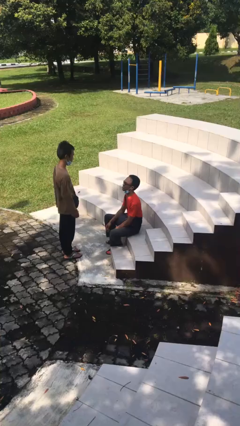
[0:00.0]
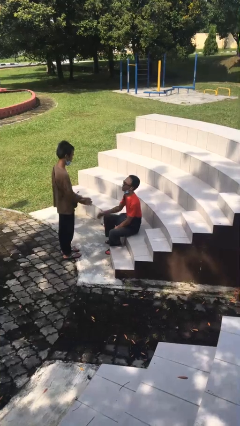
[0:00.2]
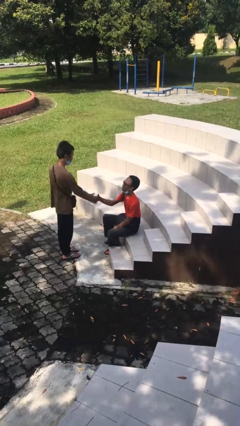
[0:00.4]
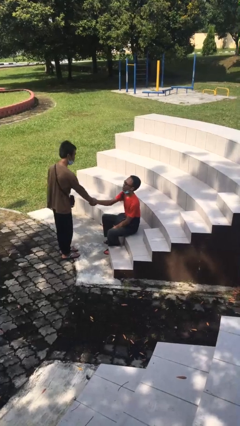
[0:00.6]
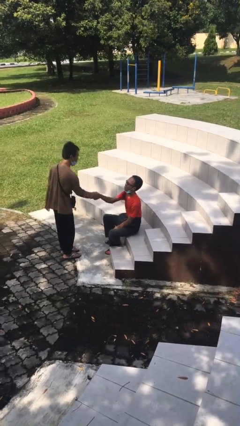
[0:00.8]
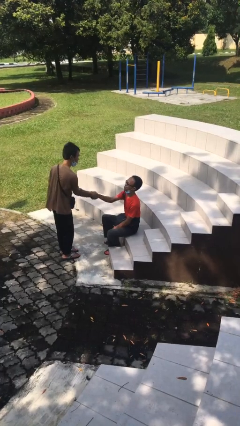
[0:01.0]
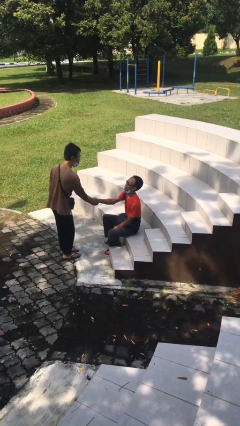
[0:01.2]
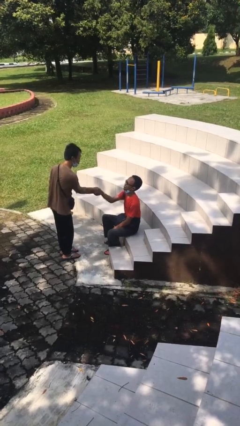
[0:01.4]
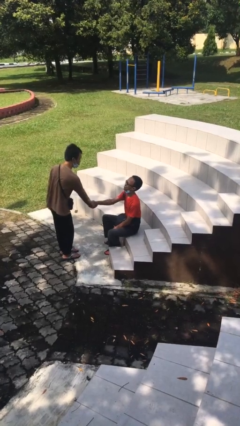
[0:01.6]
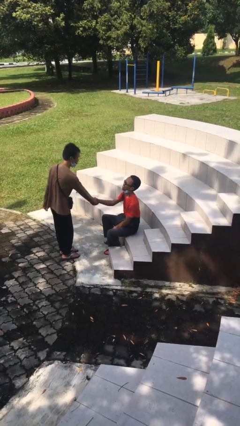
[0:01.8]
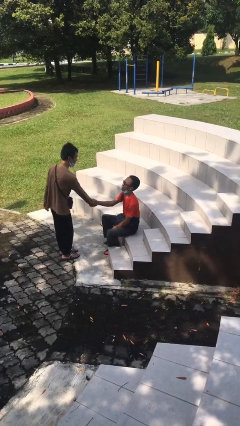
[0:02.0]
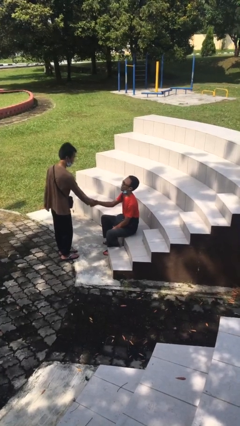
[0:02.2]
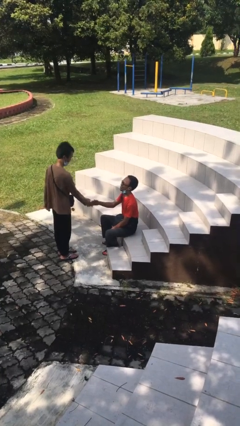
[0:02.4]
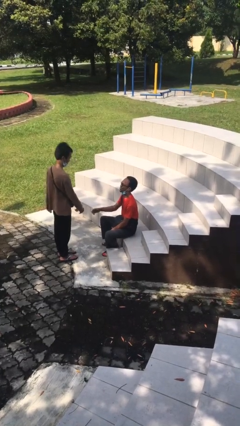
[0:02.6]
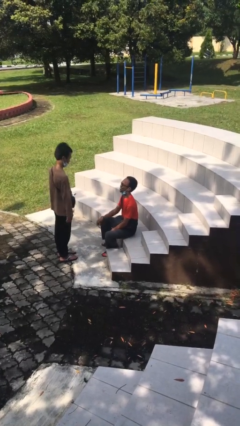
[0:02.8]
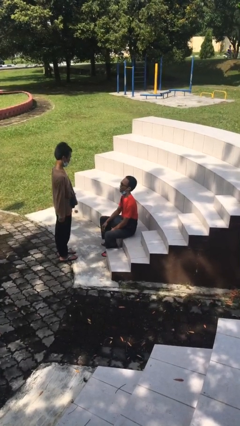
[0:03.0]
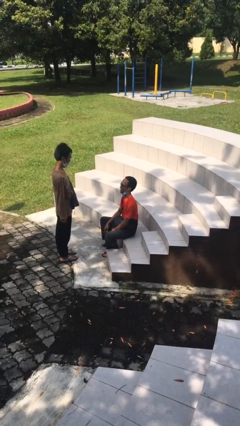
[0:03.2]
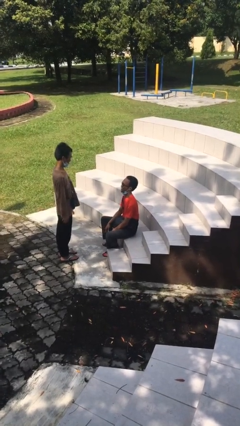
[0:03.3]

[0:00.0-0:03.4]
person shakes hand

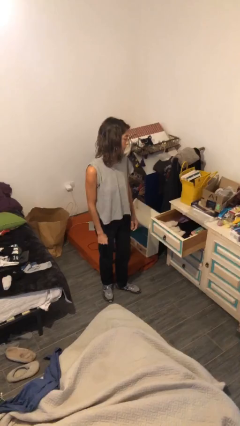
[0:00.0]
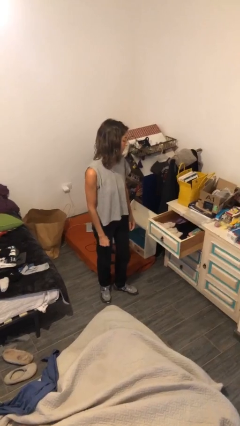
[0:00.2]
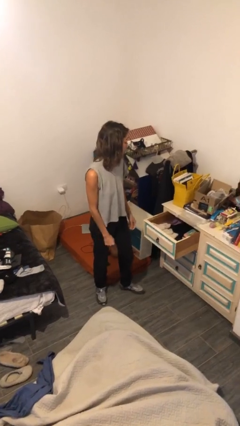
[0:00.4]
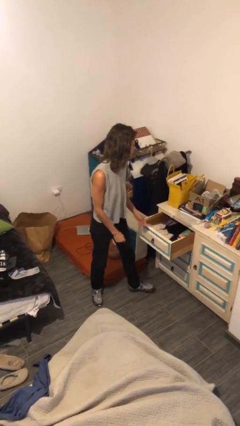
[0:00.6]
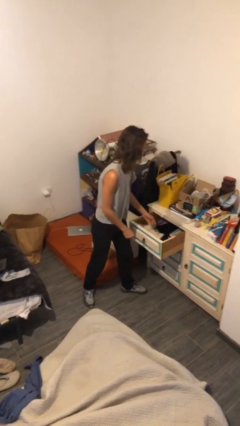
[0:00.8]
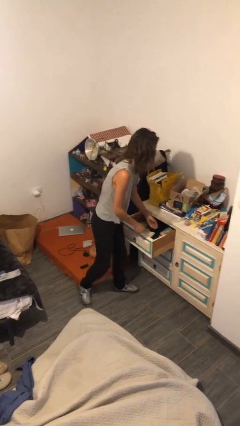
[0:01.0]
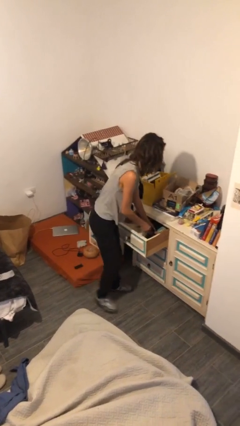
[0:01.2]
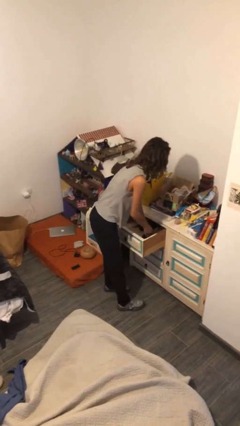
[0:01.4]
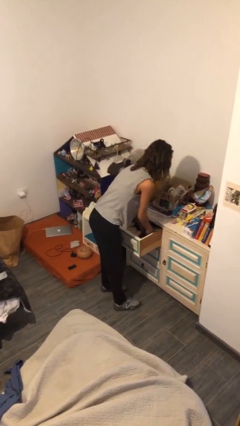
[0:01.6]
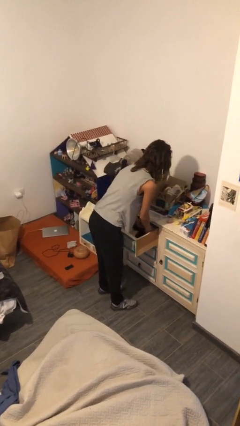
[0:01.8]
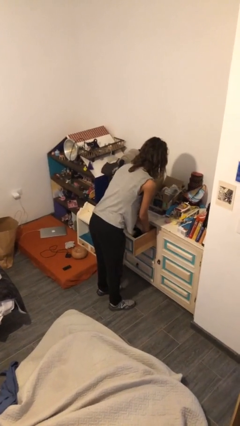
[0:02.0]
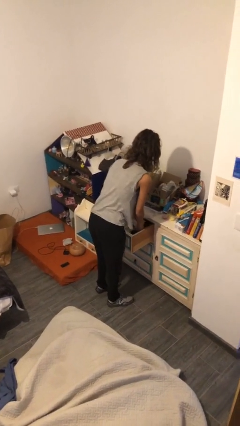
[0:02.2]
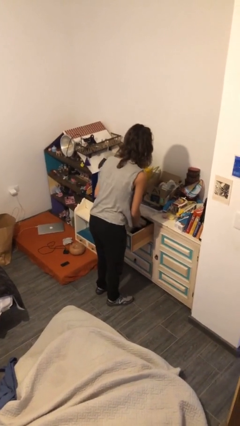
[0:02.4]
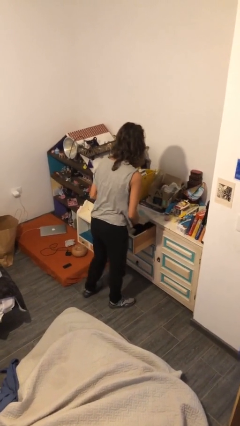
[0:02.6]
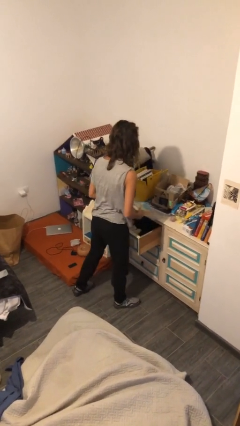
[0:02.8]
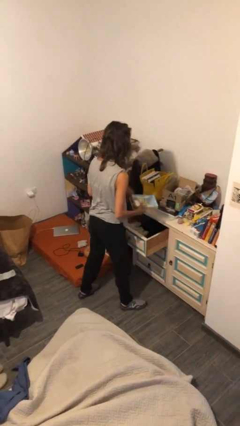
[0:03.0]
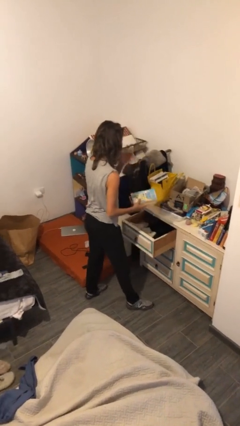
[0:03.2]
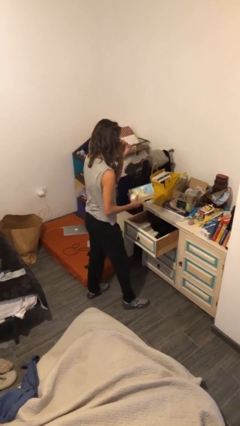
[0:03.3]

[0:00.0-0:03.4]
person picks up object from cabinet

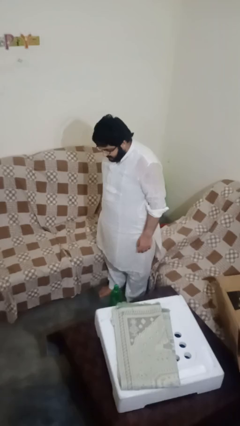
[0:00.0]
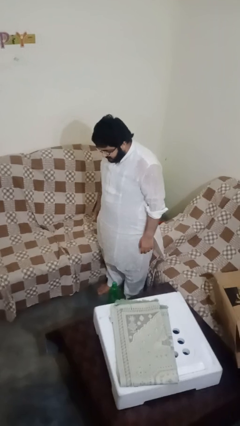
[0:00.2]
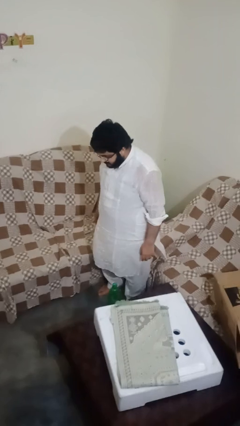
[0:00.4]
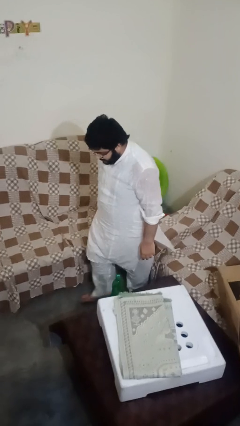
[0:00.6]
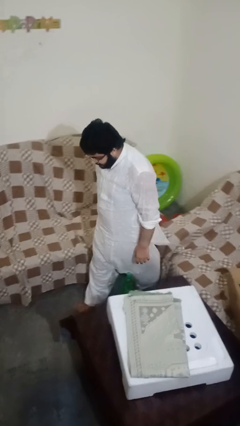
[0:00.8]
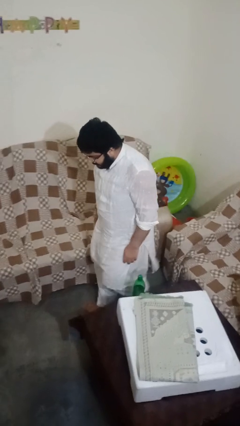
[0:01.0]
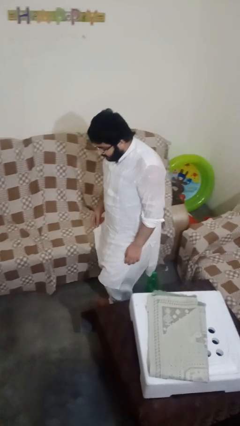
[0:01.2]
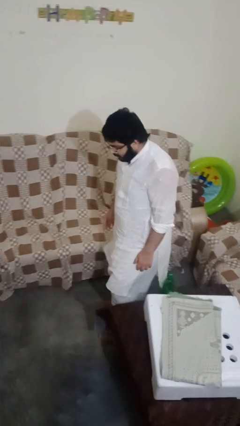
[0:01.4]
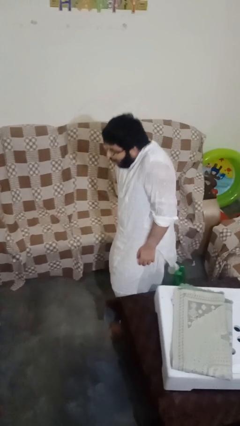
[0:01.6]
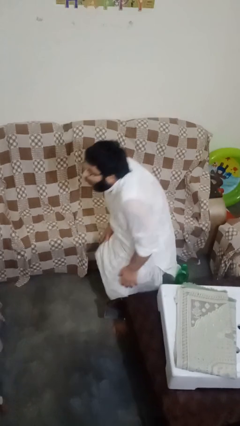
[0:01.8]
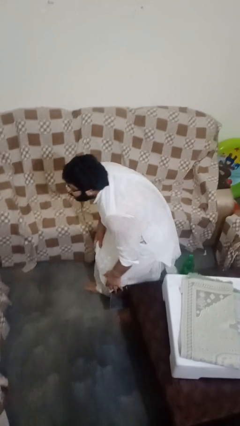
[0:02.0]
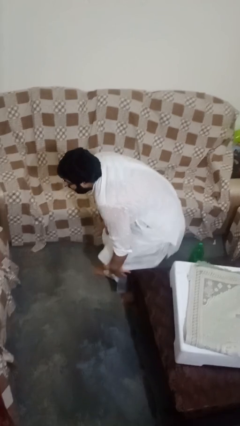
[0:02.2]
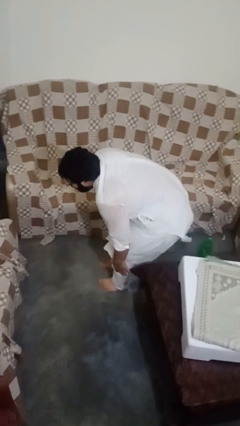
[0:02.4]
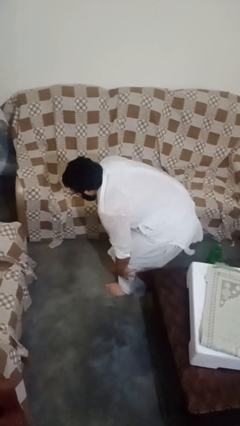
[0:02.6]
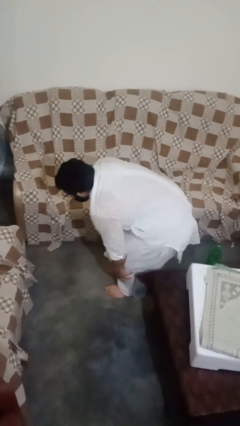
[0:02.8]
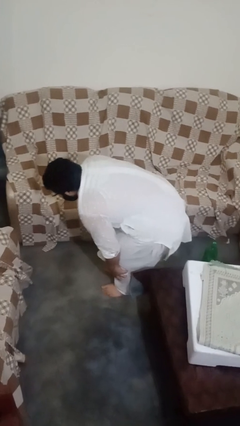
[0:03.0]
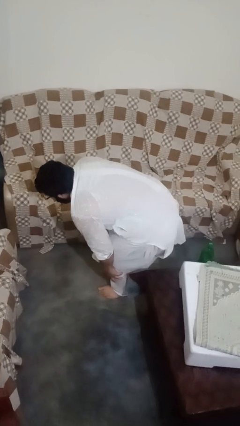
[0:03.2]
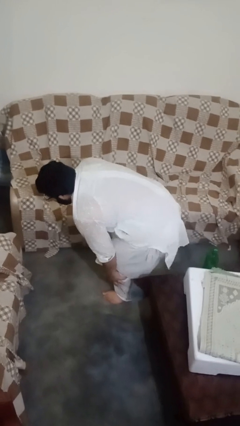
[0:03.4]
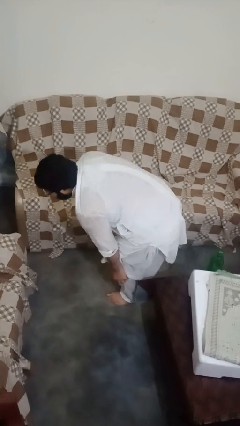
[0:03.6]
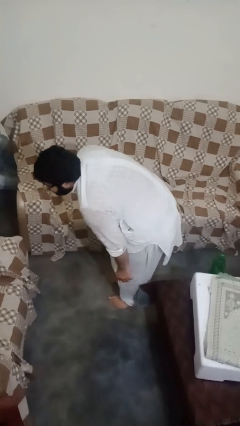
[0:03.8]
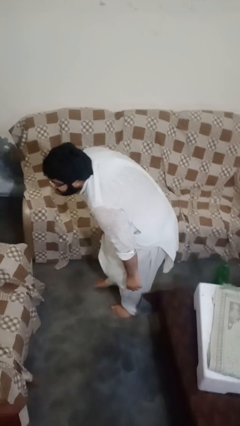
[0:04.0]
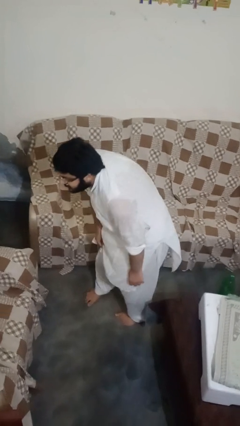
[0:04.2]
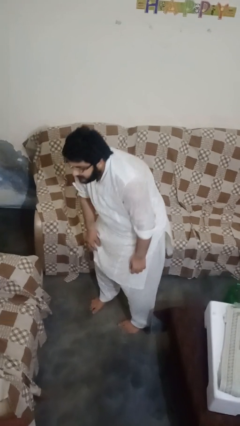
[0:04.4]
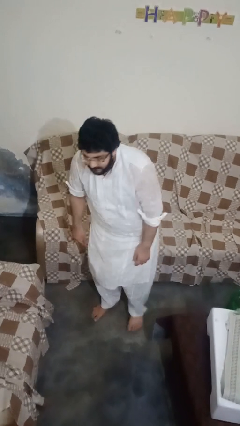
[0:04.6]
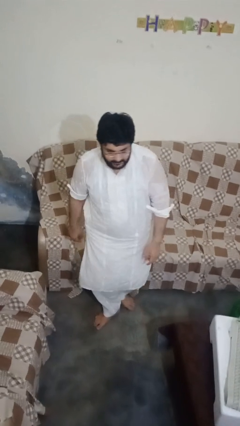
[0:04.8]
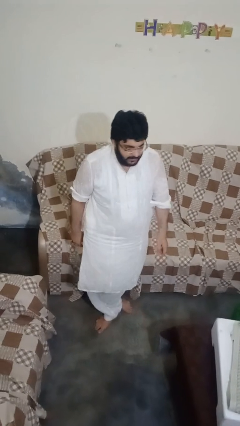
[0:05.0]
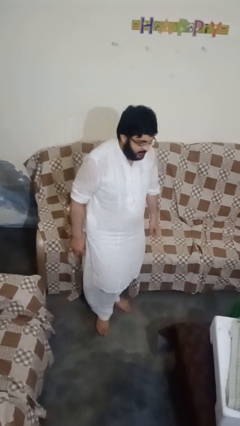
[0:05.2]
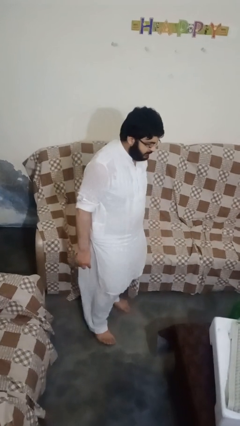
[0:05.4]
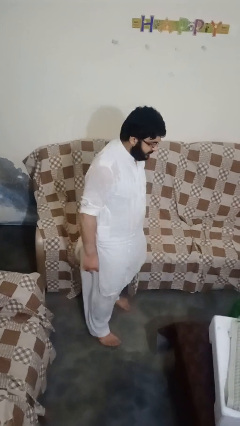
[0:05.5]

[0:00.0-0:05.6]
person bumps into table

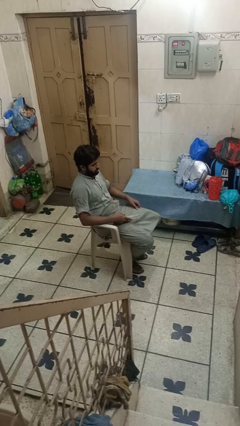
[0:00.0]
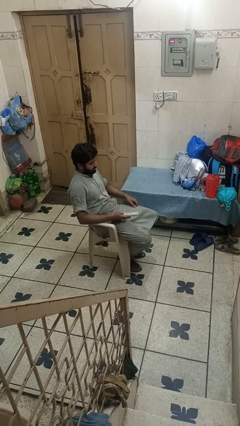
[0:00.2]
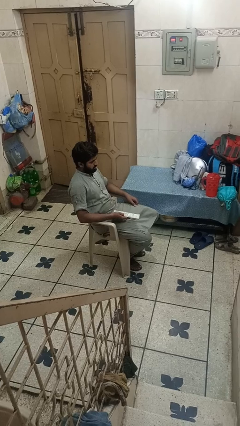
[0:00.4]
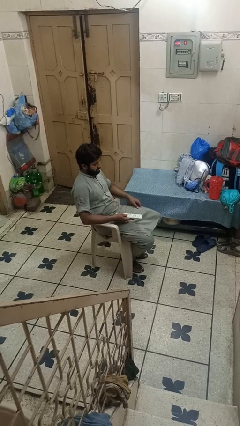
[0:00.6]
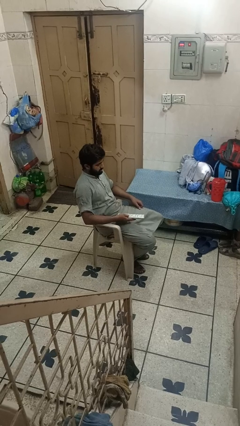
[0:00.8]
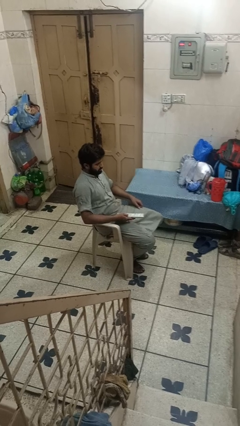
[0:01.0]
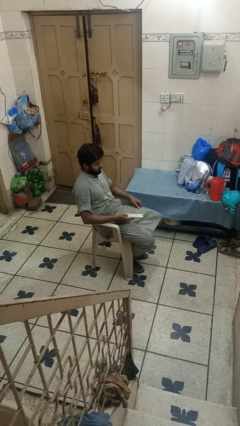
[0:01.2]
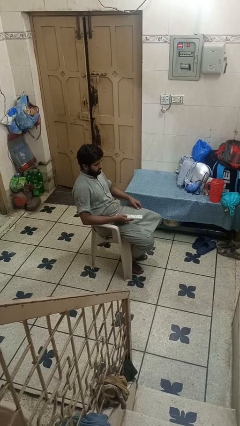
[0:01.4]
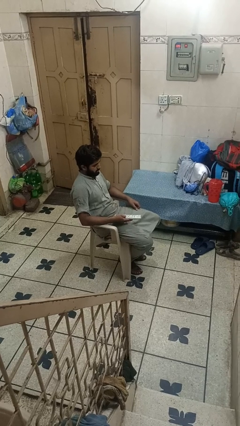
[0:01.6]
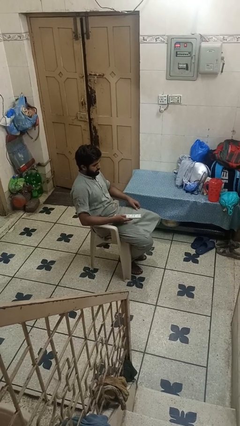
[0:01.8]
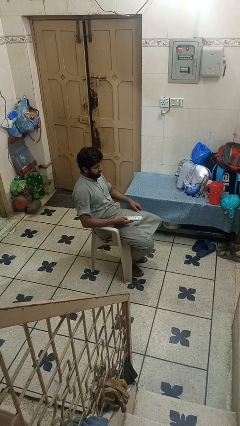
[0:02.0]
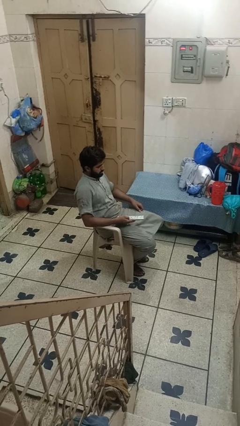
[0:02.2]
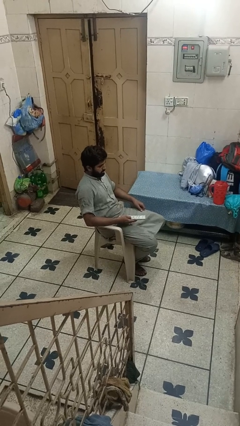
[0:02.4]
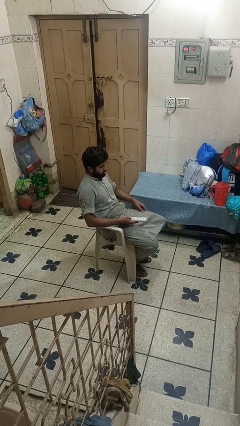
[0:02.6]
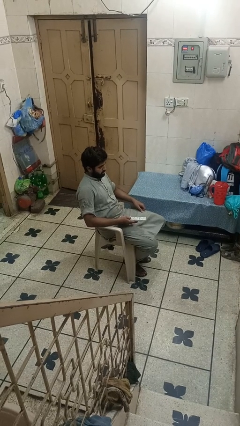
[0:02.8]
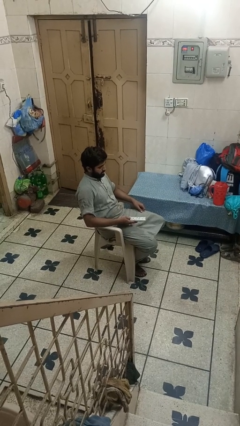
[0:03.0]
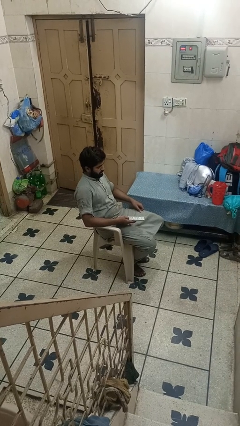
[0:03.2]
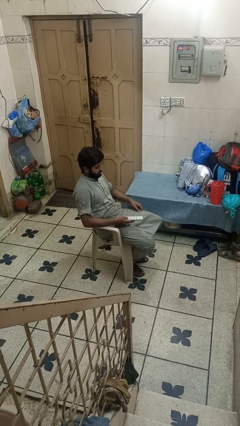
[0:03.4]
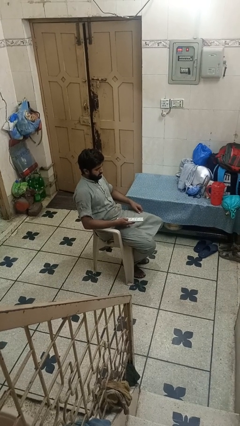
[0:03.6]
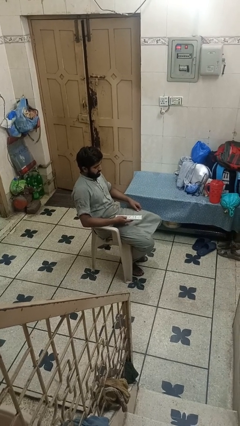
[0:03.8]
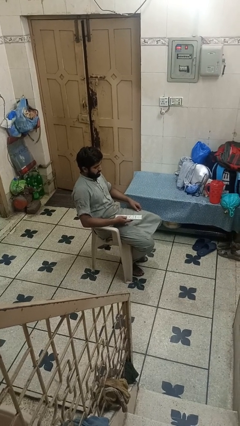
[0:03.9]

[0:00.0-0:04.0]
person uses television remote

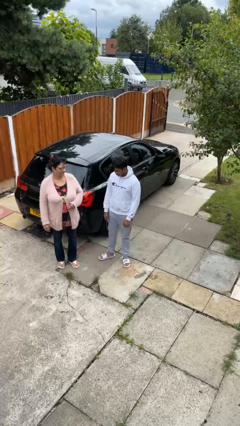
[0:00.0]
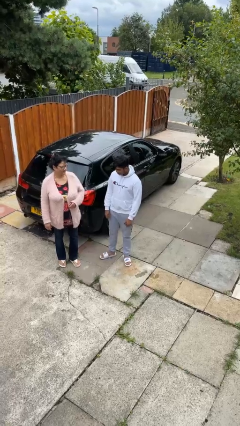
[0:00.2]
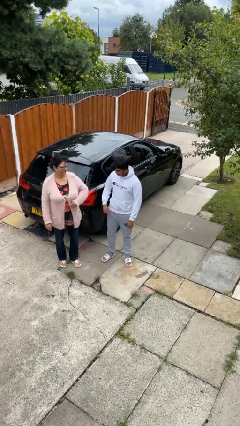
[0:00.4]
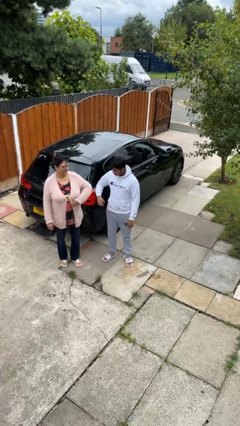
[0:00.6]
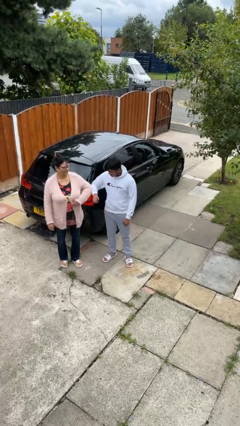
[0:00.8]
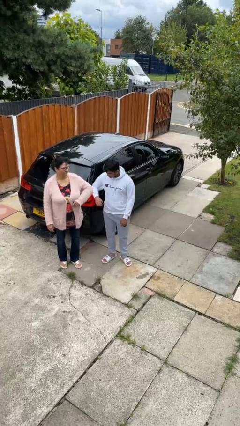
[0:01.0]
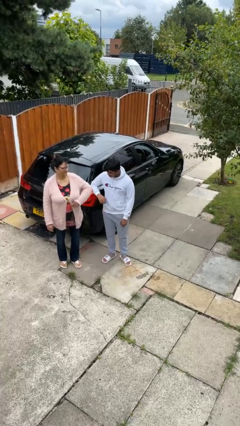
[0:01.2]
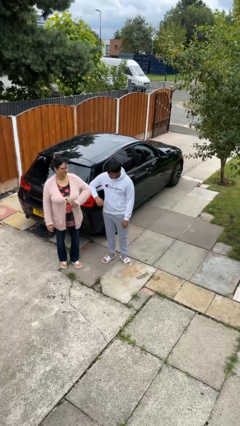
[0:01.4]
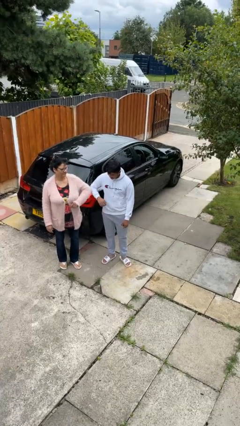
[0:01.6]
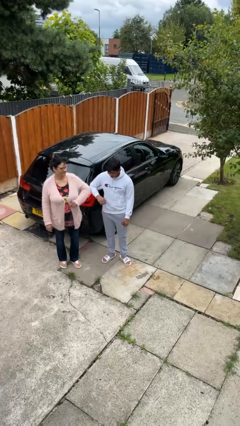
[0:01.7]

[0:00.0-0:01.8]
person nudges person with elbow
